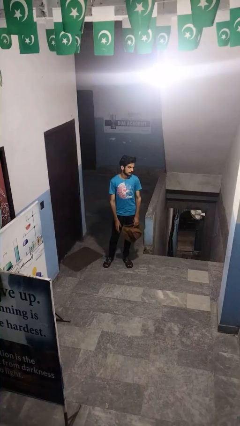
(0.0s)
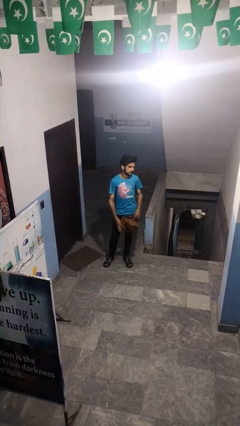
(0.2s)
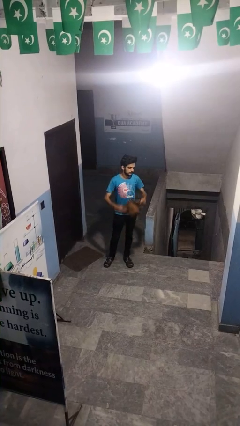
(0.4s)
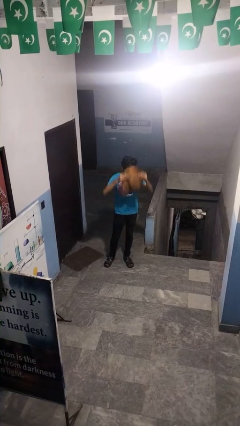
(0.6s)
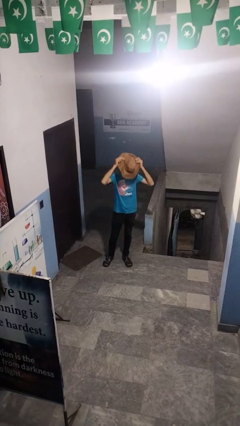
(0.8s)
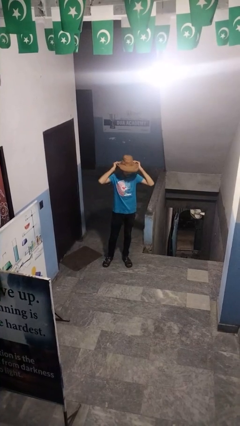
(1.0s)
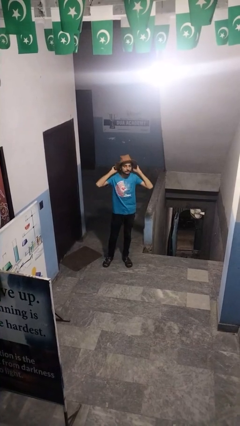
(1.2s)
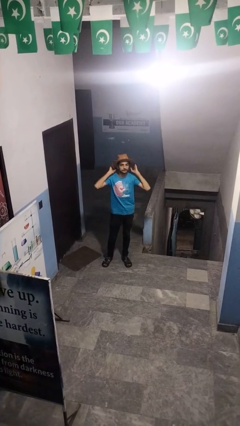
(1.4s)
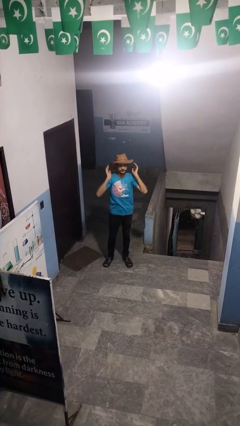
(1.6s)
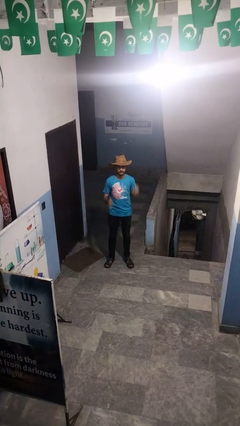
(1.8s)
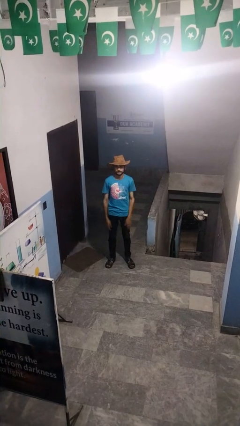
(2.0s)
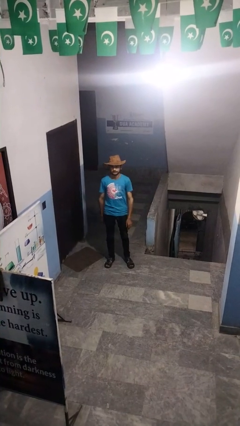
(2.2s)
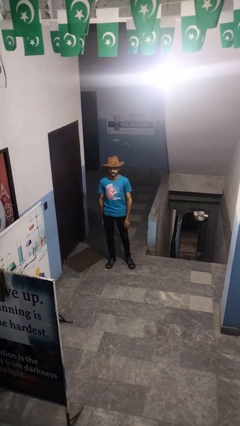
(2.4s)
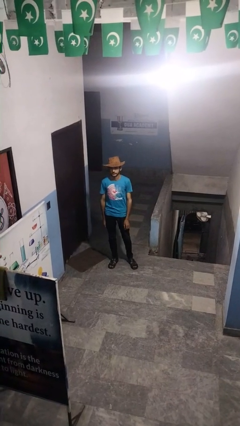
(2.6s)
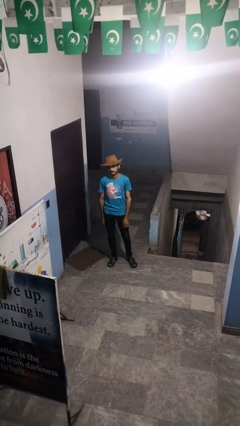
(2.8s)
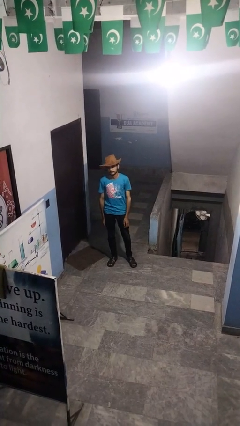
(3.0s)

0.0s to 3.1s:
person puts on hat

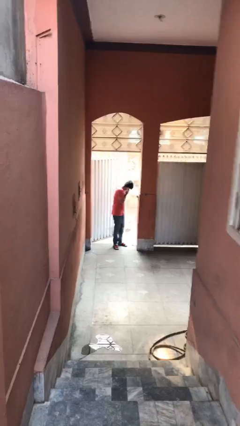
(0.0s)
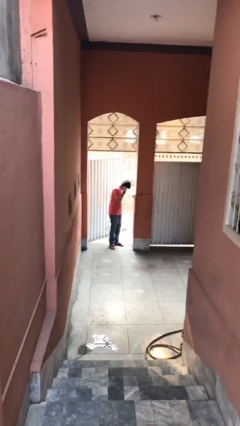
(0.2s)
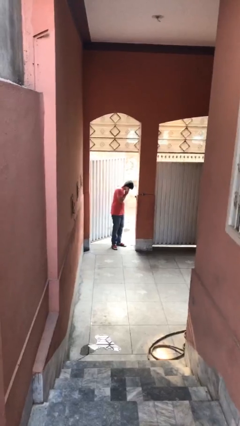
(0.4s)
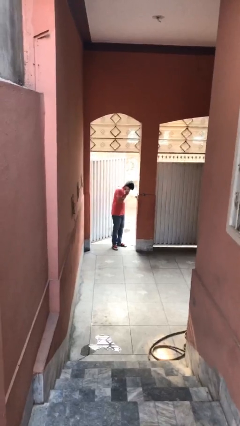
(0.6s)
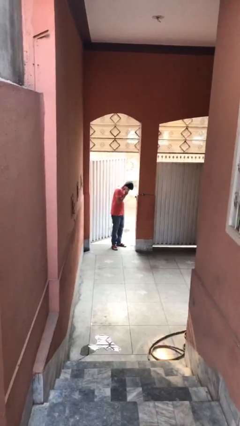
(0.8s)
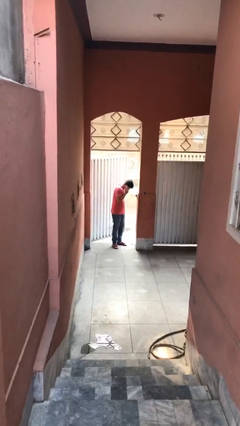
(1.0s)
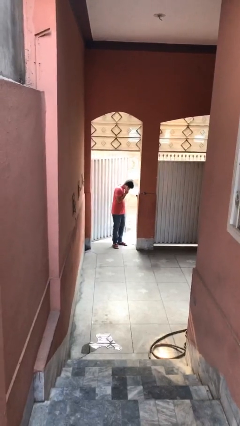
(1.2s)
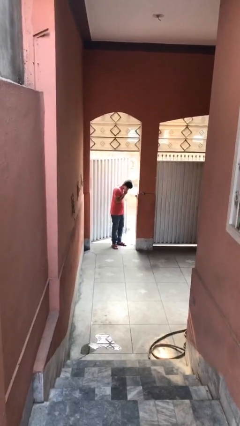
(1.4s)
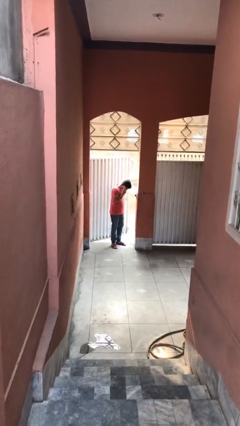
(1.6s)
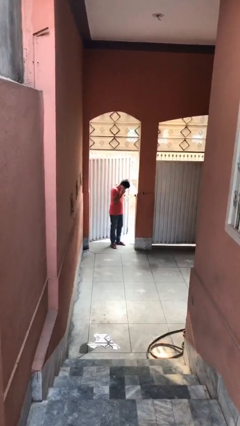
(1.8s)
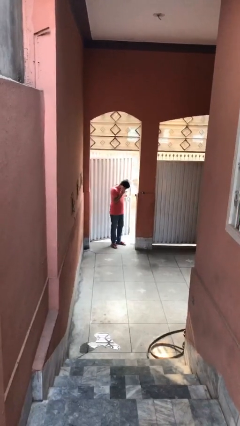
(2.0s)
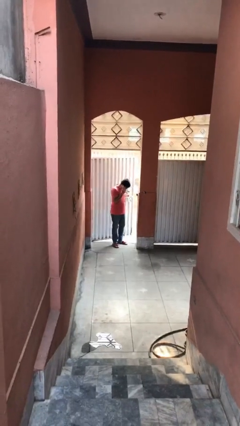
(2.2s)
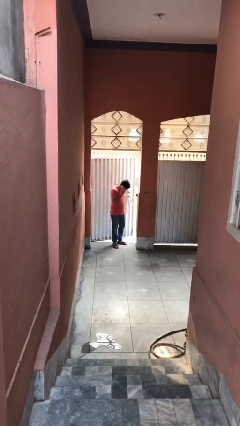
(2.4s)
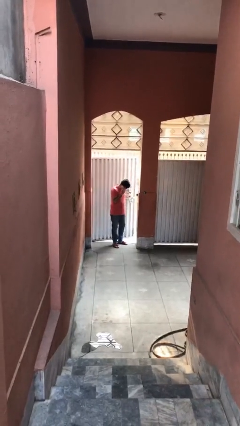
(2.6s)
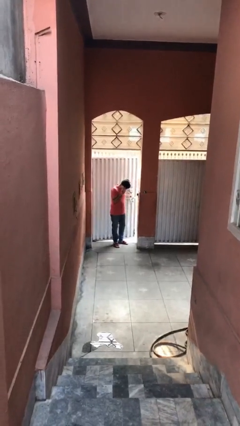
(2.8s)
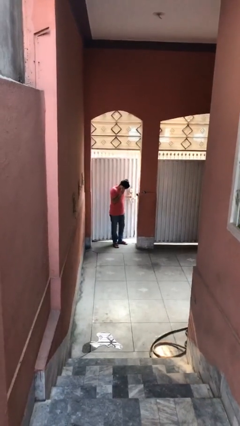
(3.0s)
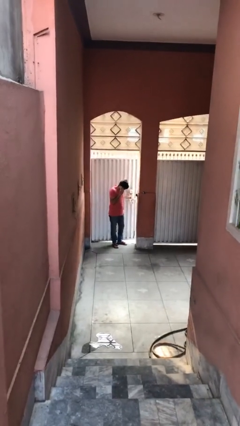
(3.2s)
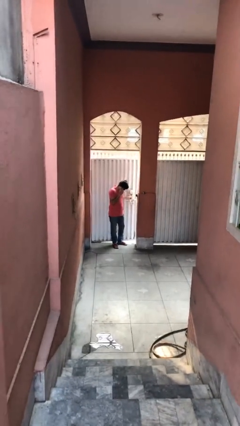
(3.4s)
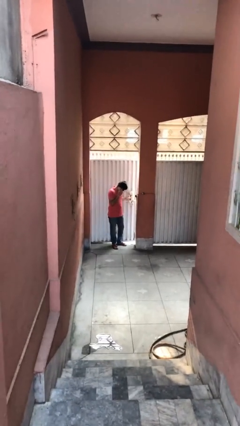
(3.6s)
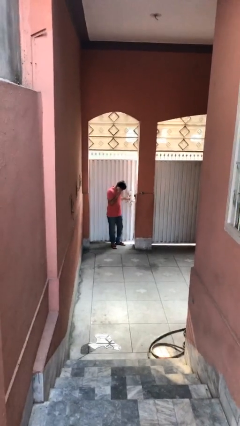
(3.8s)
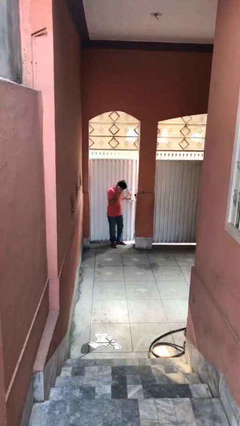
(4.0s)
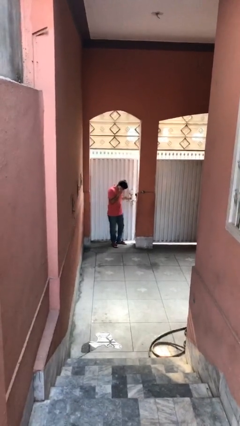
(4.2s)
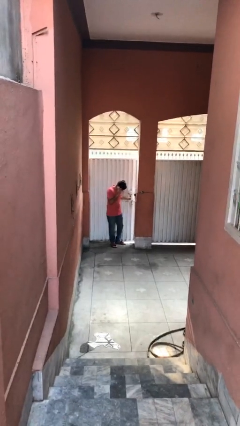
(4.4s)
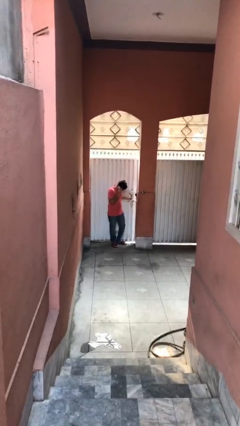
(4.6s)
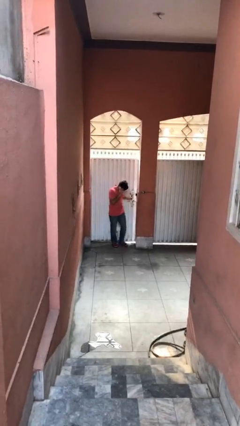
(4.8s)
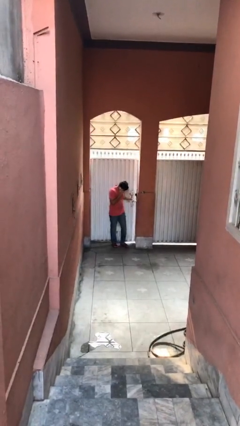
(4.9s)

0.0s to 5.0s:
person closes facility door

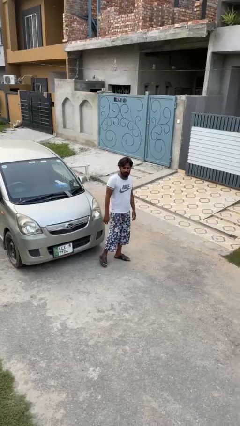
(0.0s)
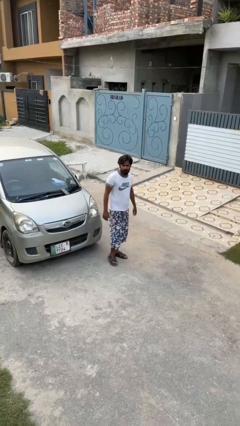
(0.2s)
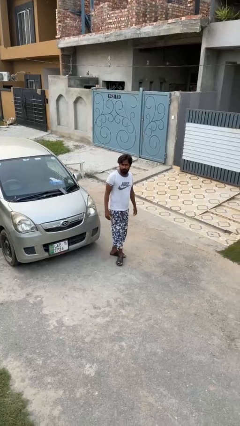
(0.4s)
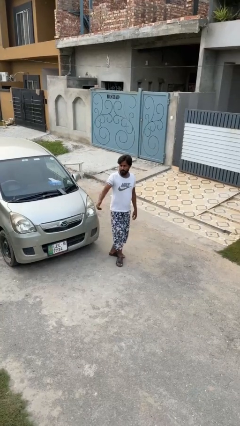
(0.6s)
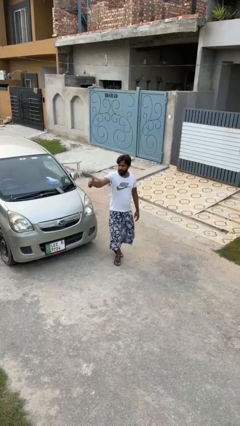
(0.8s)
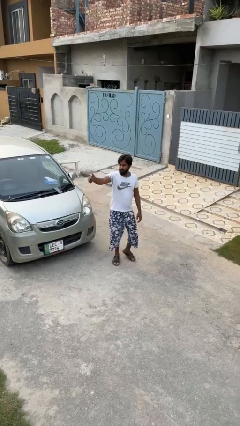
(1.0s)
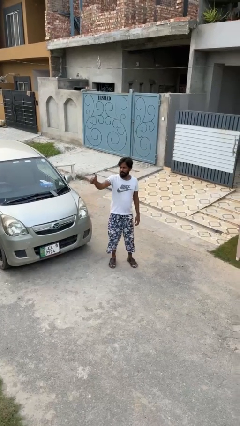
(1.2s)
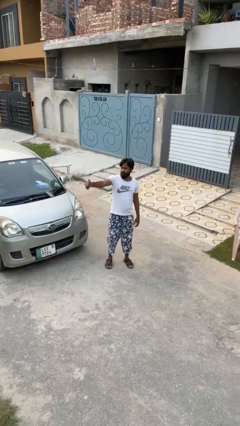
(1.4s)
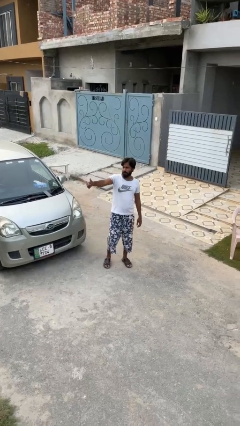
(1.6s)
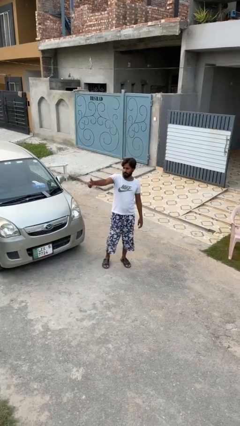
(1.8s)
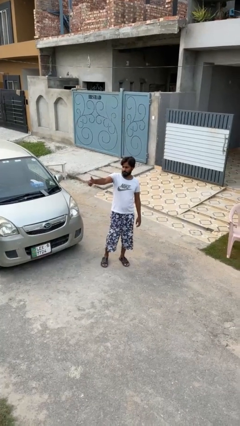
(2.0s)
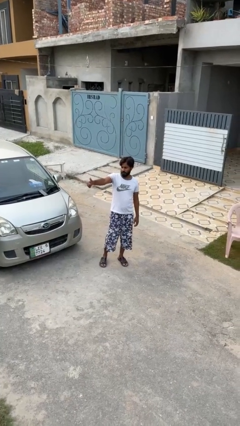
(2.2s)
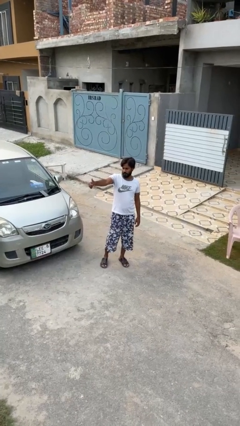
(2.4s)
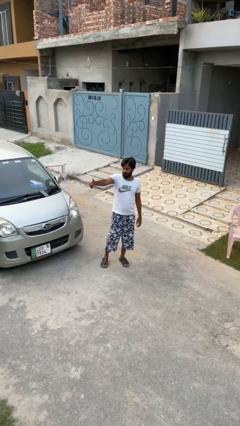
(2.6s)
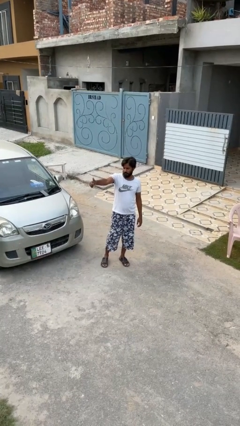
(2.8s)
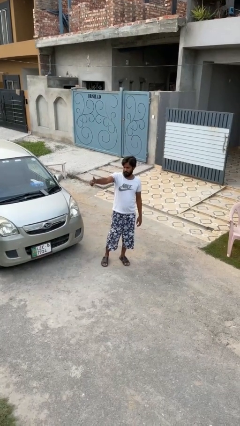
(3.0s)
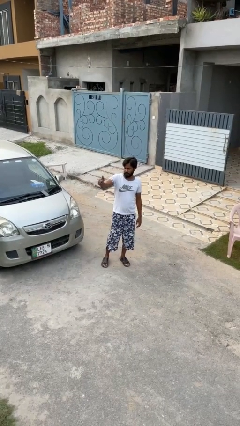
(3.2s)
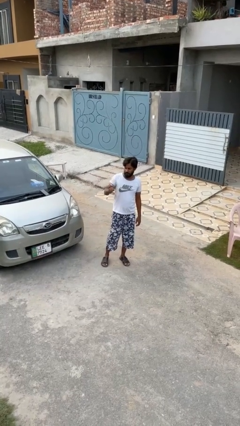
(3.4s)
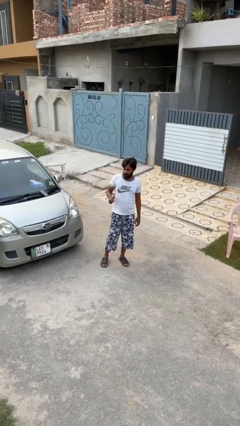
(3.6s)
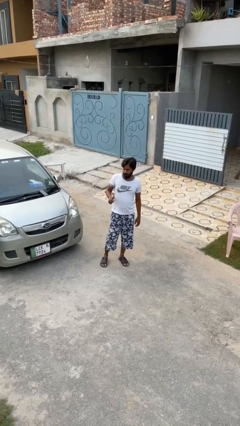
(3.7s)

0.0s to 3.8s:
person gestures thumbs up

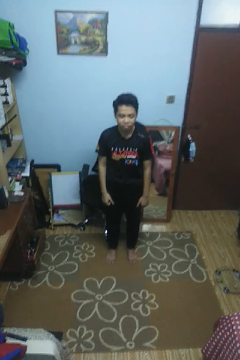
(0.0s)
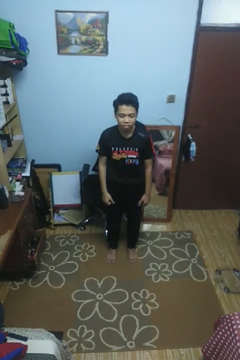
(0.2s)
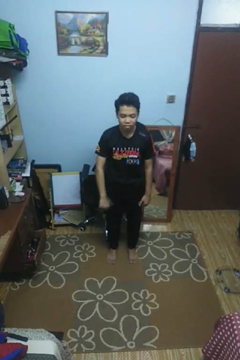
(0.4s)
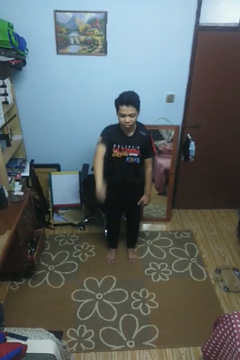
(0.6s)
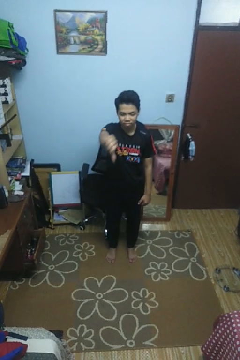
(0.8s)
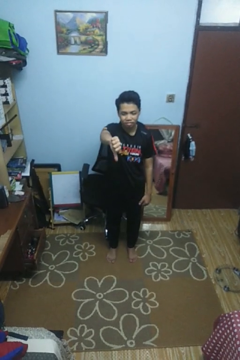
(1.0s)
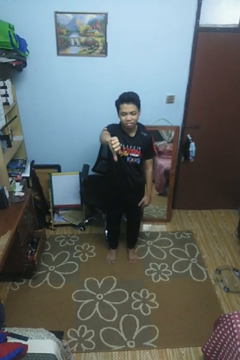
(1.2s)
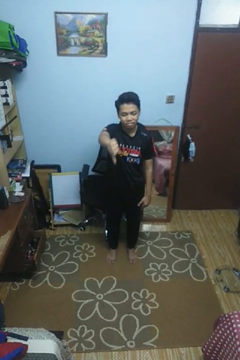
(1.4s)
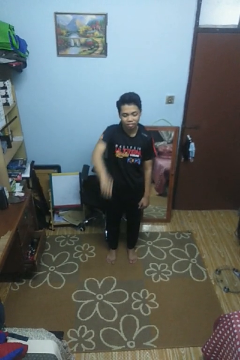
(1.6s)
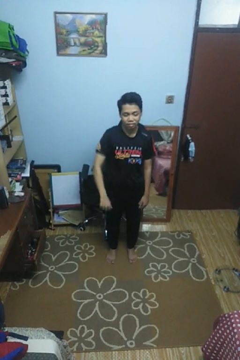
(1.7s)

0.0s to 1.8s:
person gestures thumbs down

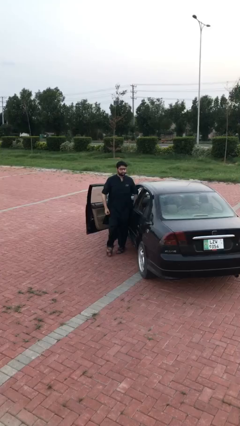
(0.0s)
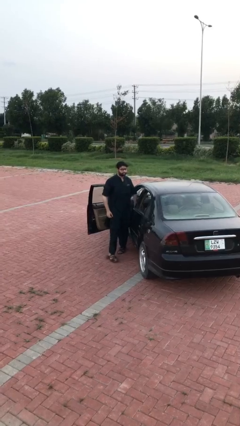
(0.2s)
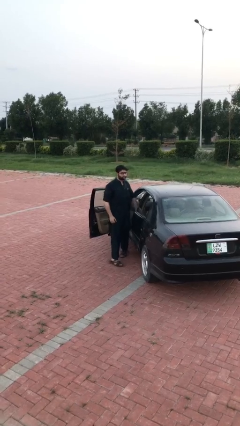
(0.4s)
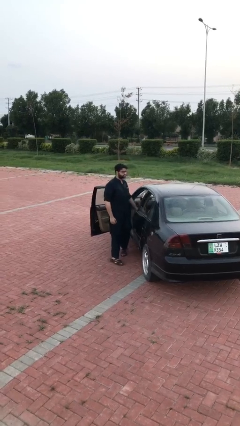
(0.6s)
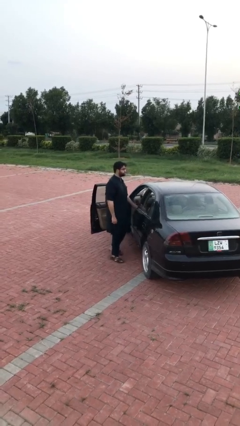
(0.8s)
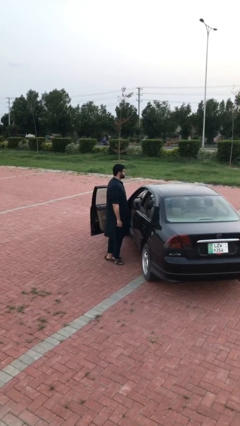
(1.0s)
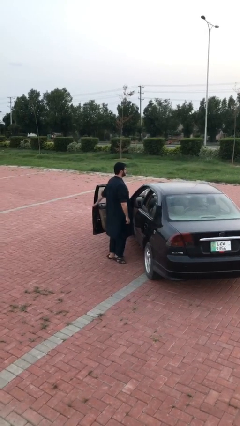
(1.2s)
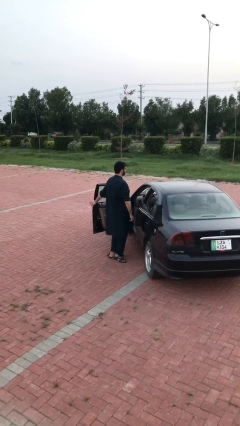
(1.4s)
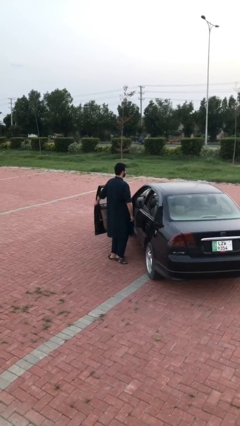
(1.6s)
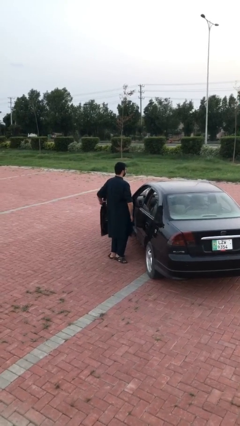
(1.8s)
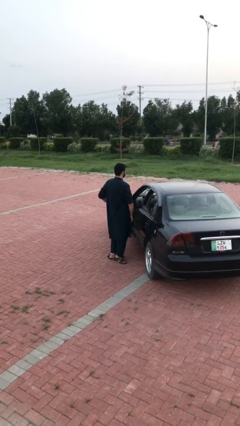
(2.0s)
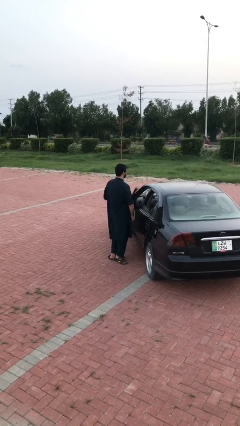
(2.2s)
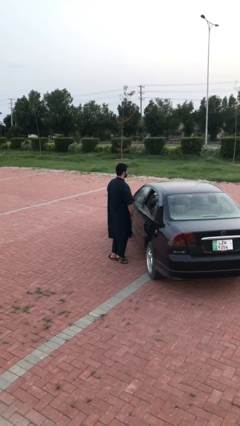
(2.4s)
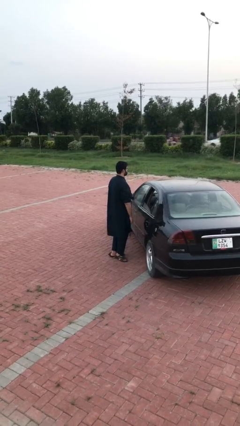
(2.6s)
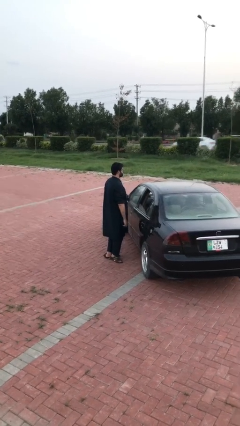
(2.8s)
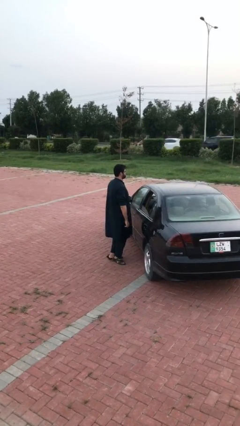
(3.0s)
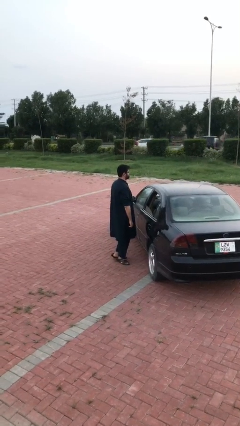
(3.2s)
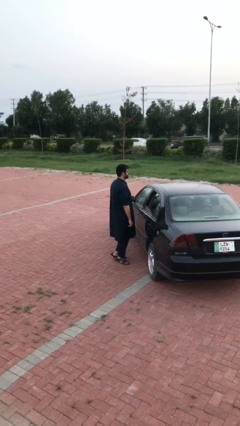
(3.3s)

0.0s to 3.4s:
person closes car door

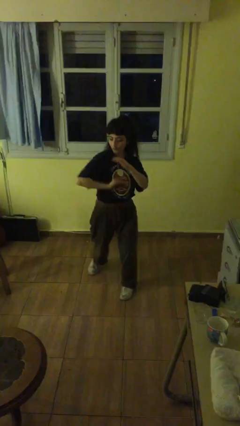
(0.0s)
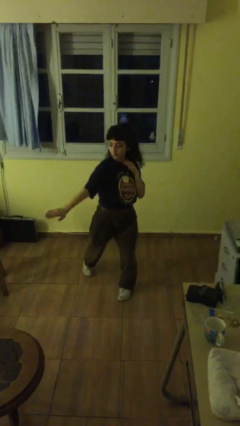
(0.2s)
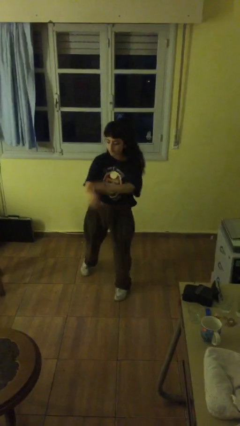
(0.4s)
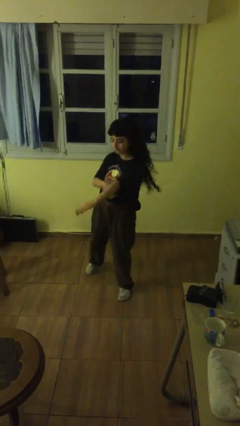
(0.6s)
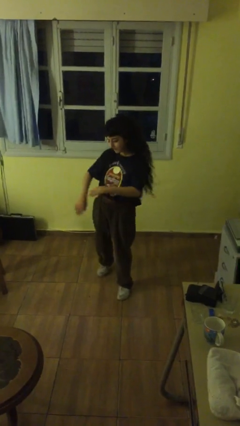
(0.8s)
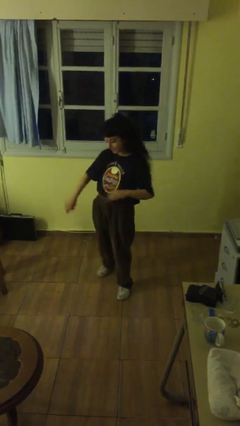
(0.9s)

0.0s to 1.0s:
person karate chop
